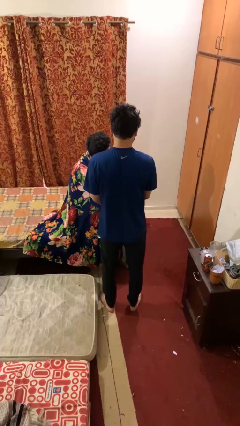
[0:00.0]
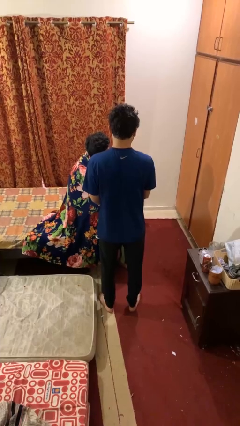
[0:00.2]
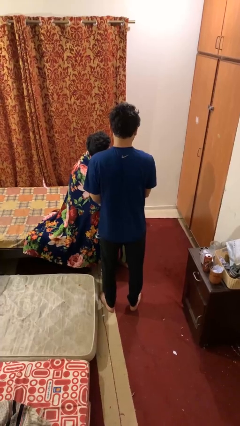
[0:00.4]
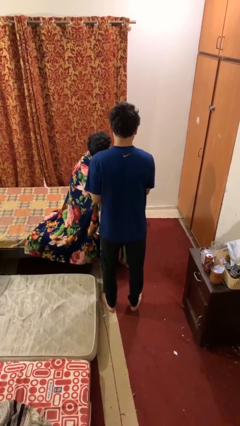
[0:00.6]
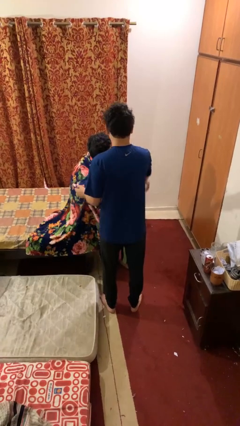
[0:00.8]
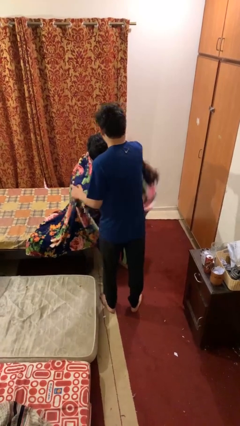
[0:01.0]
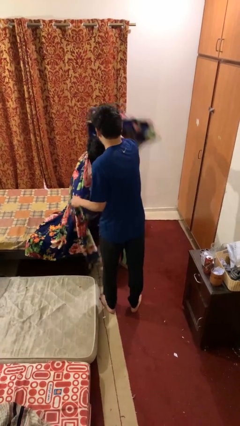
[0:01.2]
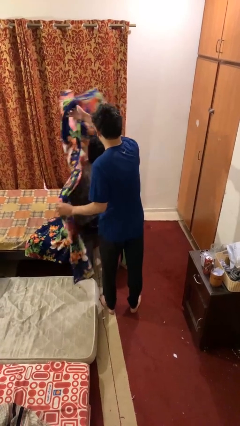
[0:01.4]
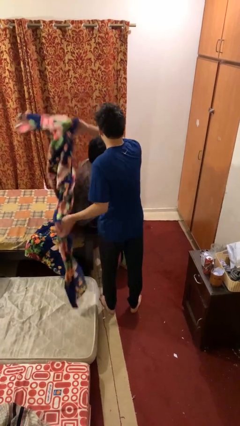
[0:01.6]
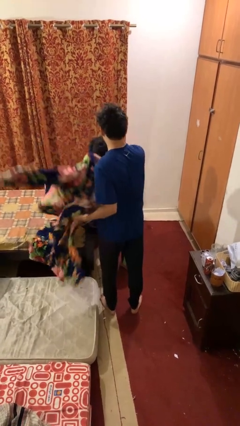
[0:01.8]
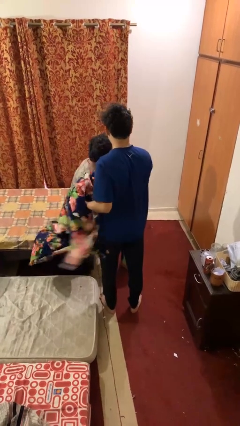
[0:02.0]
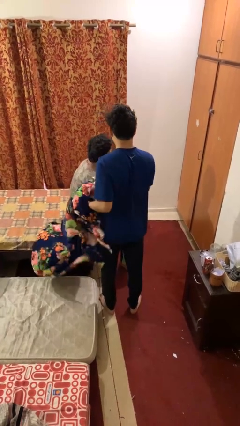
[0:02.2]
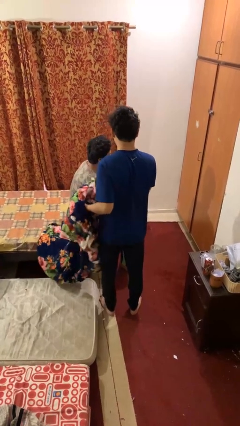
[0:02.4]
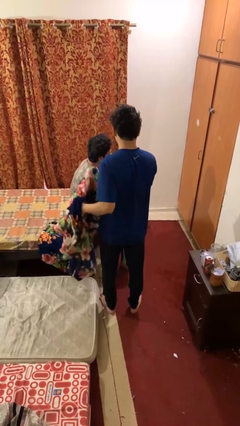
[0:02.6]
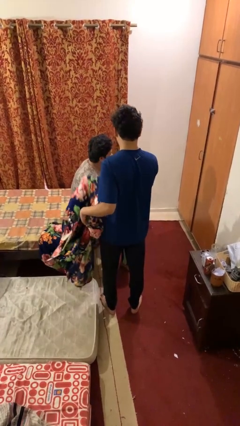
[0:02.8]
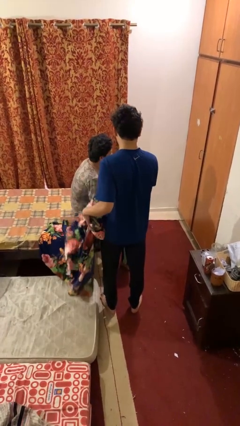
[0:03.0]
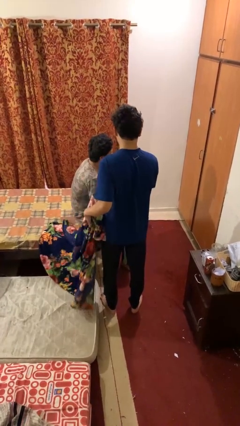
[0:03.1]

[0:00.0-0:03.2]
person uncovers friend with blanket

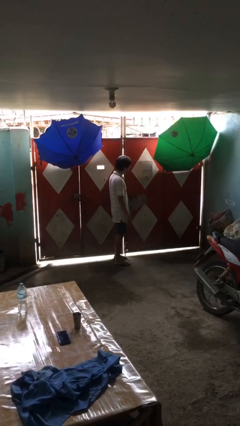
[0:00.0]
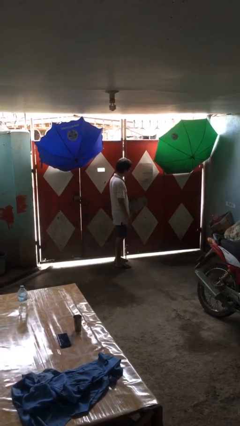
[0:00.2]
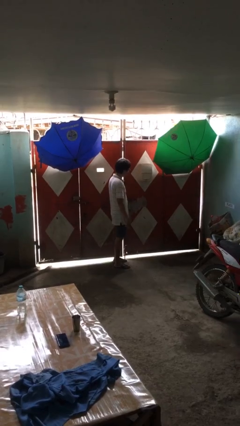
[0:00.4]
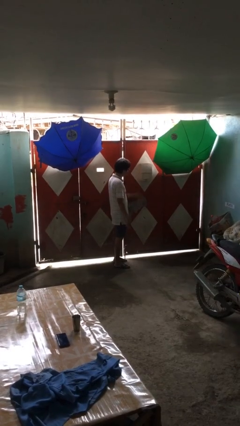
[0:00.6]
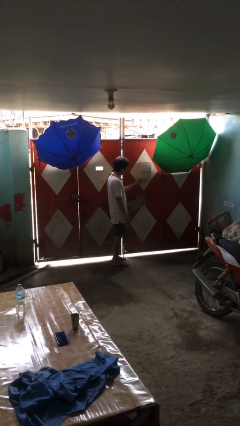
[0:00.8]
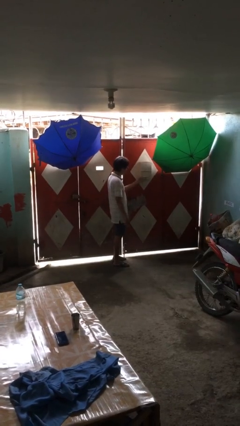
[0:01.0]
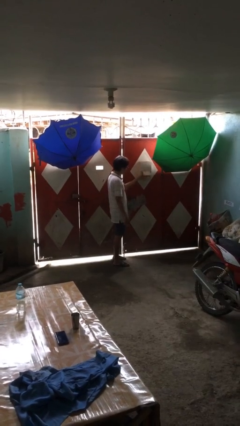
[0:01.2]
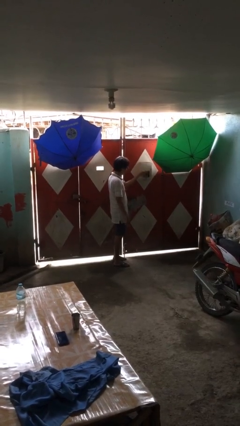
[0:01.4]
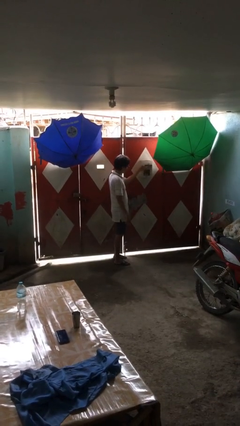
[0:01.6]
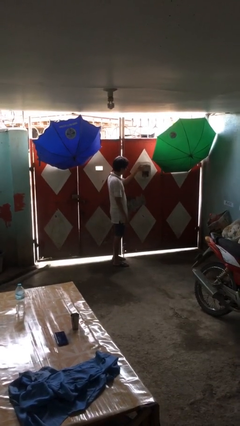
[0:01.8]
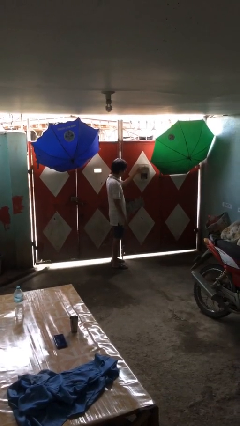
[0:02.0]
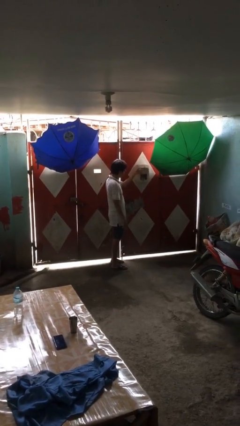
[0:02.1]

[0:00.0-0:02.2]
person opens mailbox

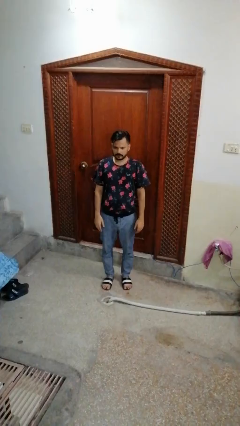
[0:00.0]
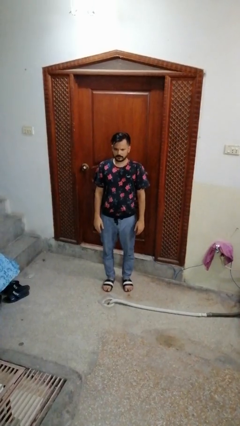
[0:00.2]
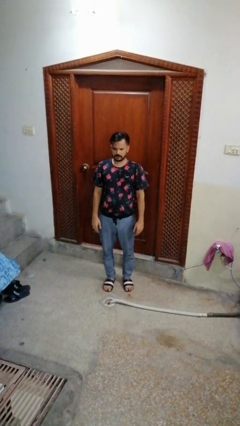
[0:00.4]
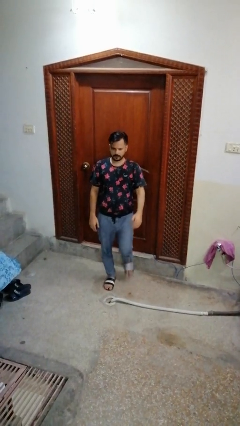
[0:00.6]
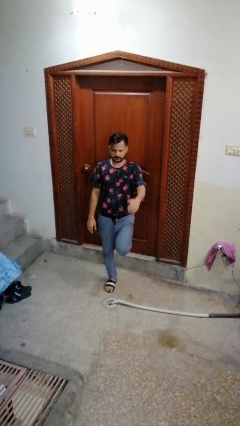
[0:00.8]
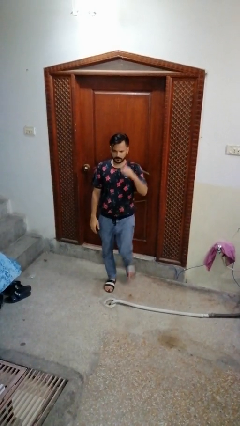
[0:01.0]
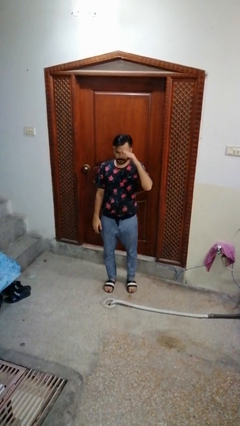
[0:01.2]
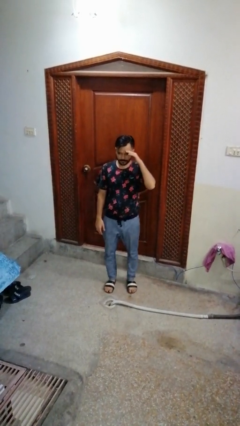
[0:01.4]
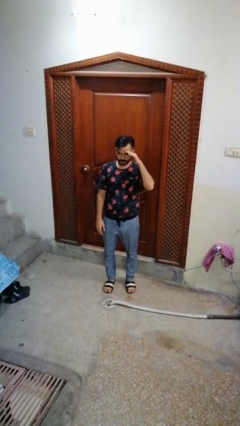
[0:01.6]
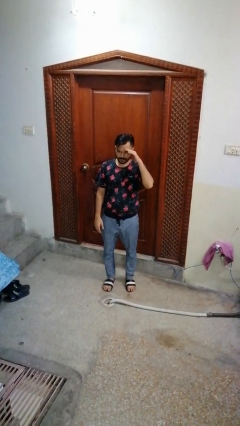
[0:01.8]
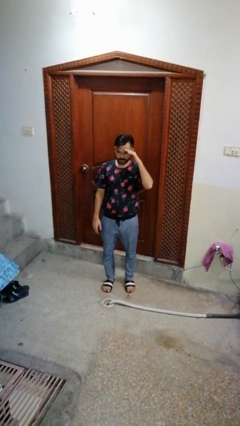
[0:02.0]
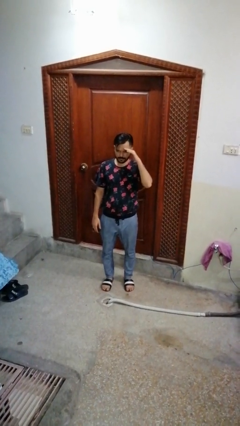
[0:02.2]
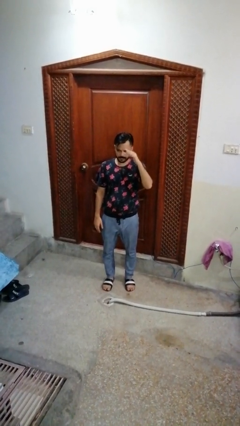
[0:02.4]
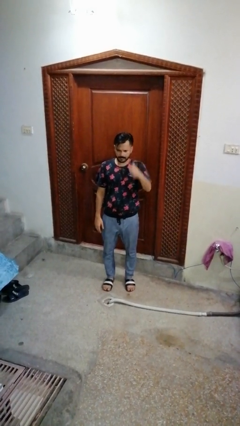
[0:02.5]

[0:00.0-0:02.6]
person salutes

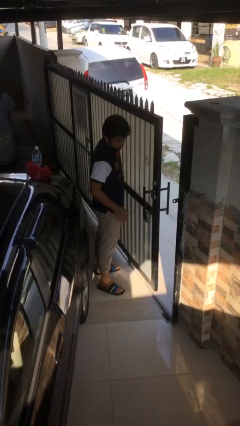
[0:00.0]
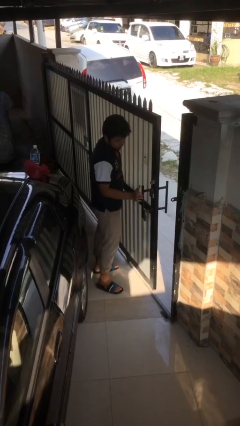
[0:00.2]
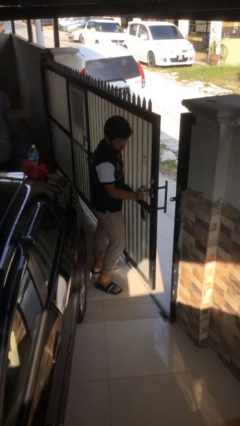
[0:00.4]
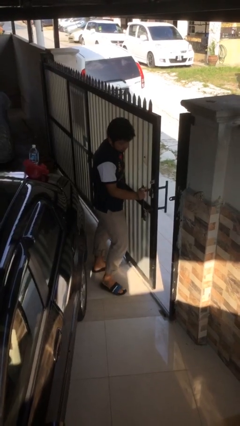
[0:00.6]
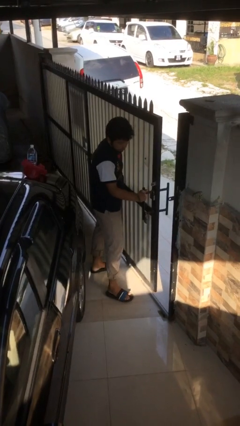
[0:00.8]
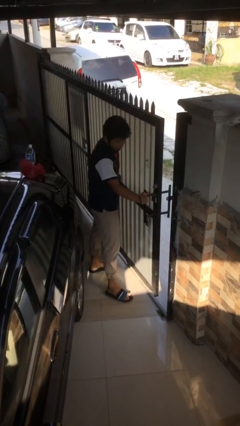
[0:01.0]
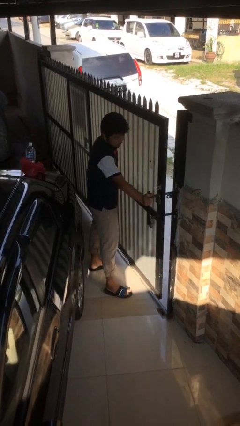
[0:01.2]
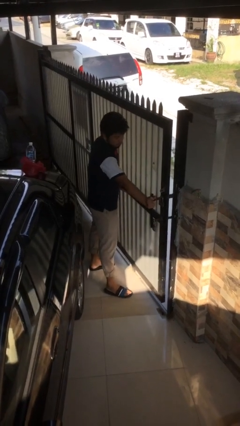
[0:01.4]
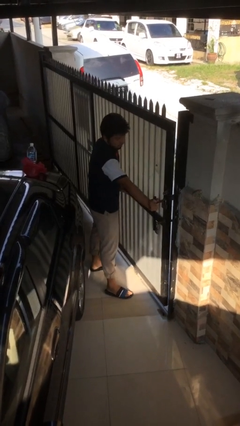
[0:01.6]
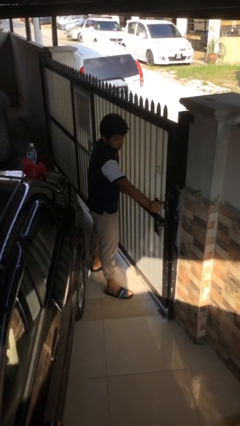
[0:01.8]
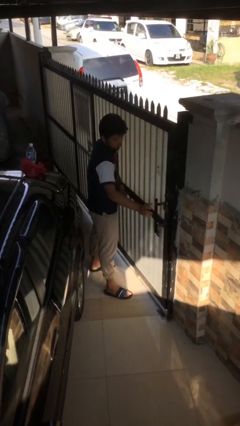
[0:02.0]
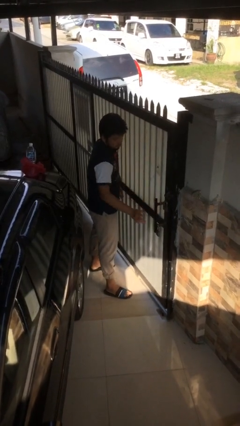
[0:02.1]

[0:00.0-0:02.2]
person closes sliding door

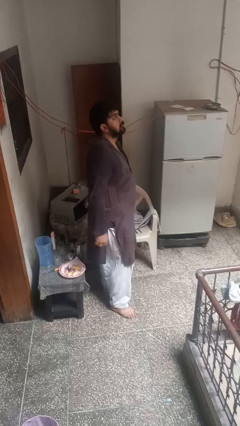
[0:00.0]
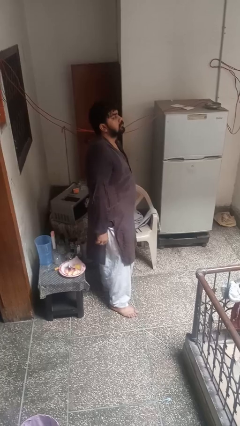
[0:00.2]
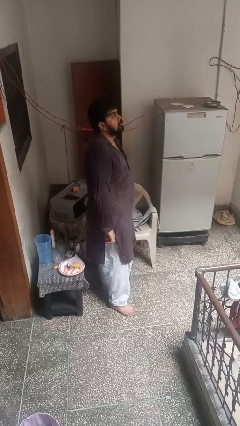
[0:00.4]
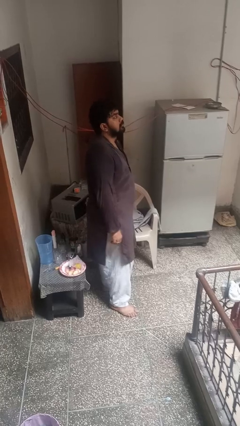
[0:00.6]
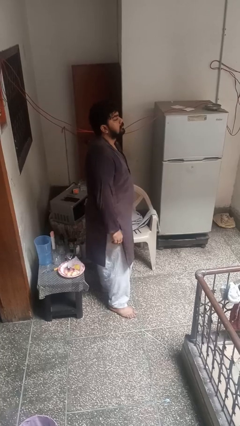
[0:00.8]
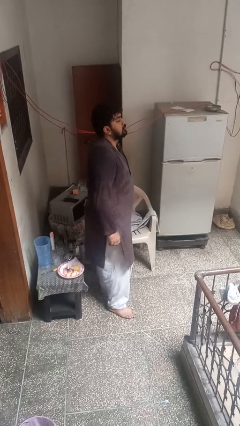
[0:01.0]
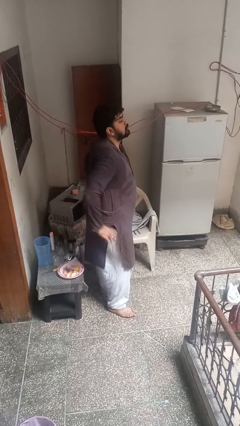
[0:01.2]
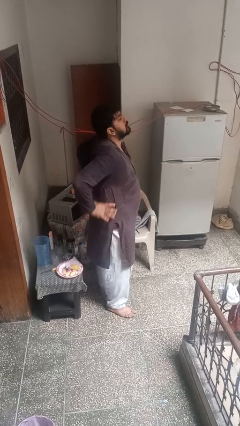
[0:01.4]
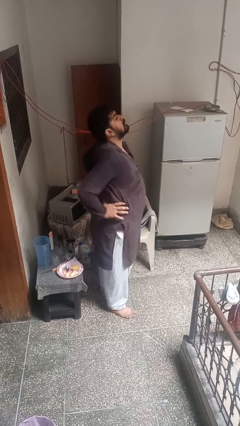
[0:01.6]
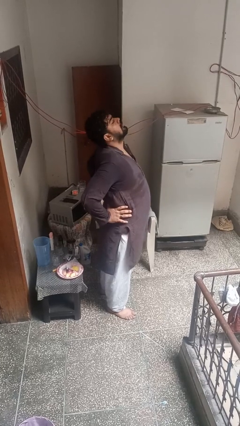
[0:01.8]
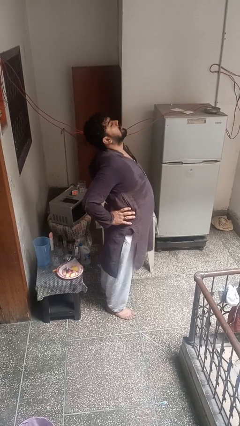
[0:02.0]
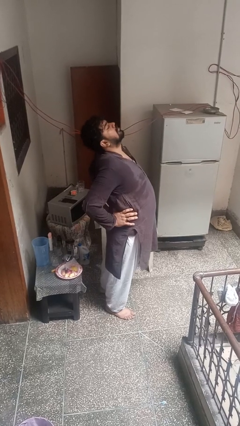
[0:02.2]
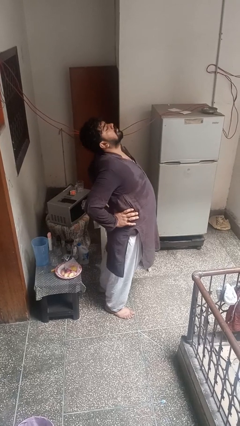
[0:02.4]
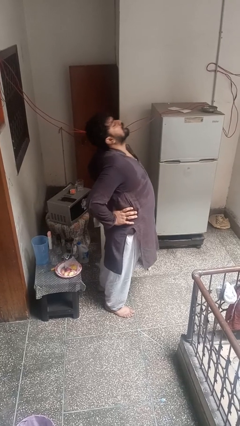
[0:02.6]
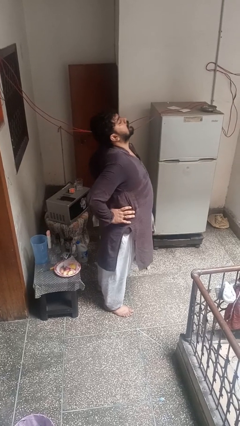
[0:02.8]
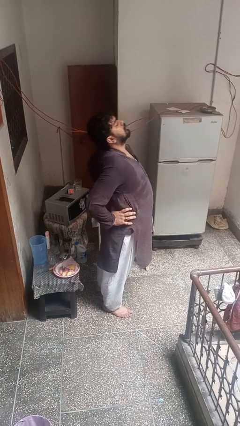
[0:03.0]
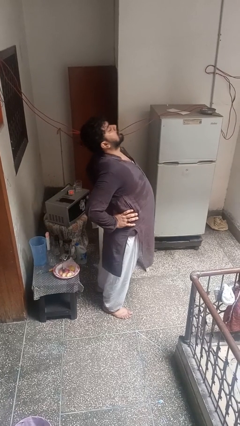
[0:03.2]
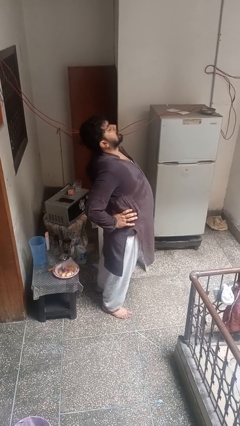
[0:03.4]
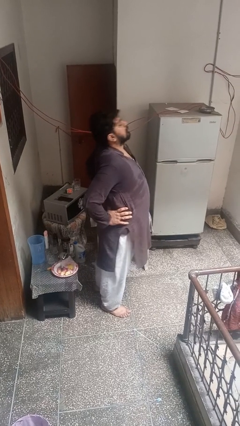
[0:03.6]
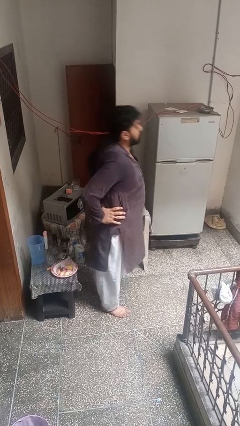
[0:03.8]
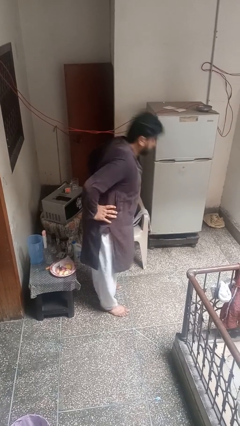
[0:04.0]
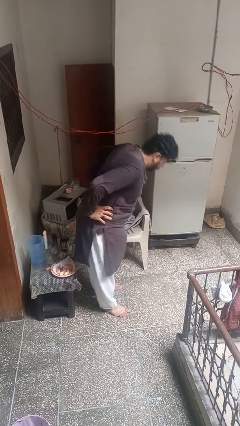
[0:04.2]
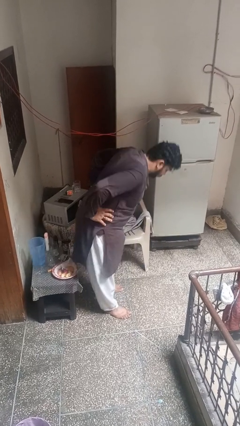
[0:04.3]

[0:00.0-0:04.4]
person stretches back

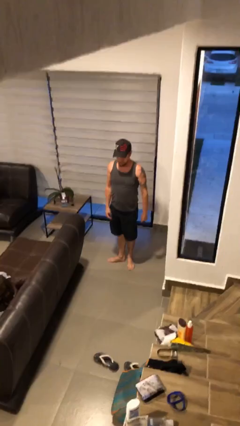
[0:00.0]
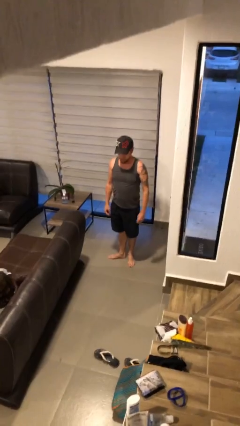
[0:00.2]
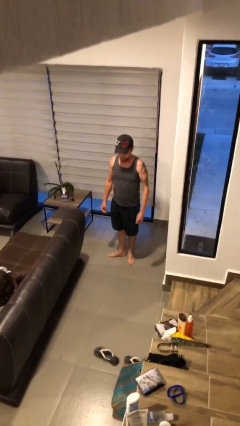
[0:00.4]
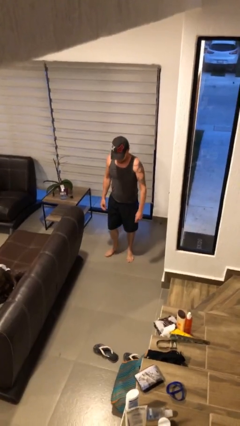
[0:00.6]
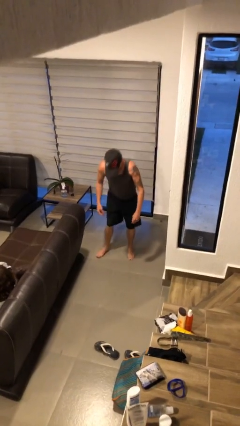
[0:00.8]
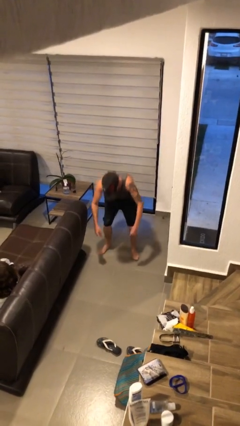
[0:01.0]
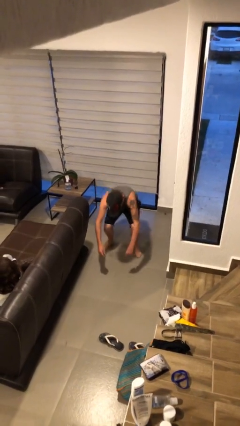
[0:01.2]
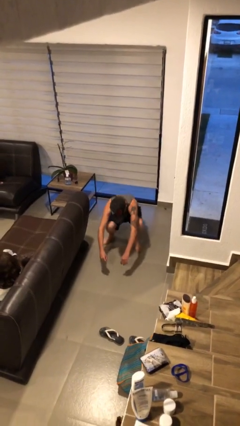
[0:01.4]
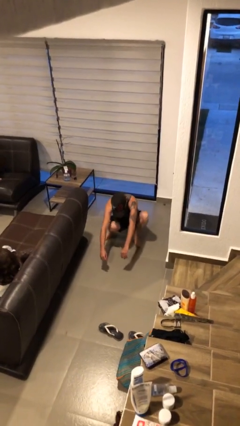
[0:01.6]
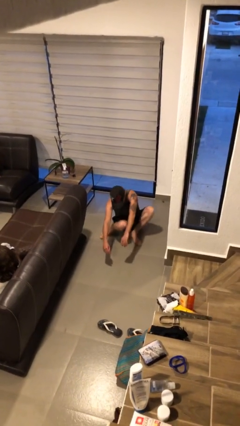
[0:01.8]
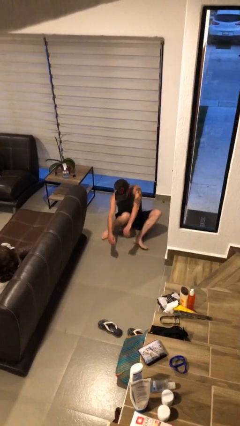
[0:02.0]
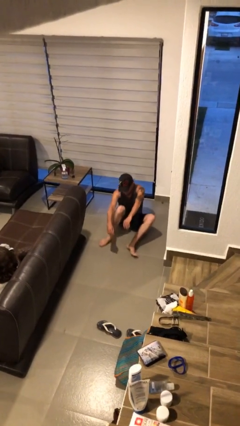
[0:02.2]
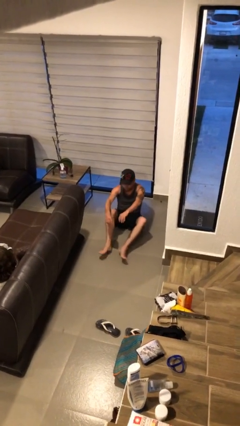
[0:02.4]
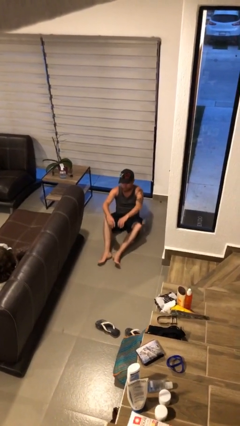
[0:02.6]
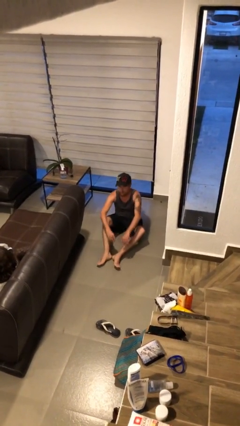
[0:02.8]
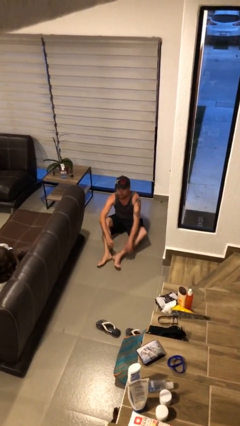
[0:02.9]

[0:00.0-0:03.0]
person sits down
